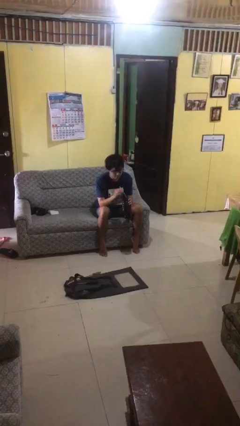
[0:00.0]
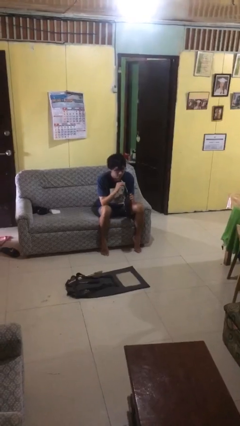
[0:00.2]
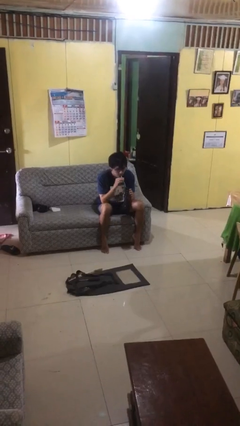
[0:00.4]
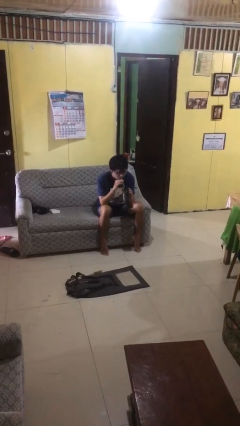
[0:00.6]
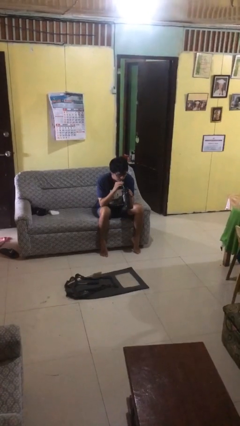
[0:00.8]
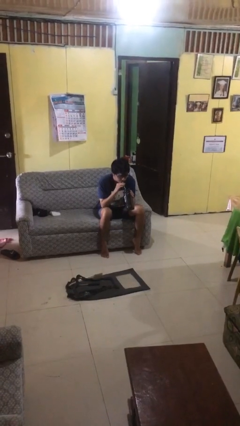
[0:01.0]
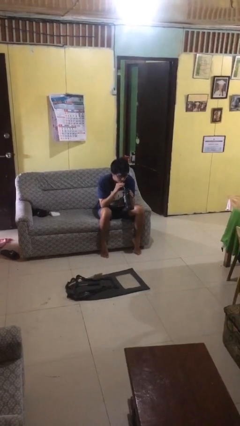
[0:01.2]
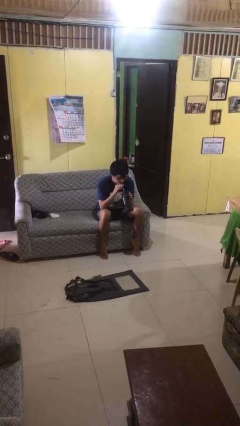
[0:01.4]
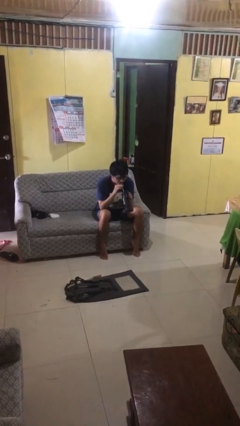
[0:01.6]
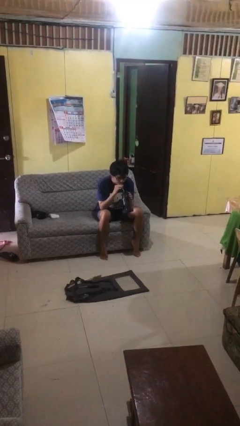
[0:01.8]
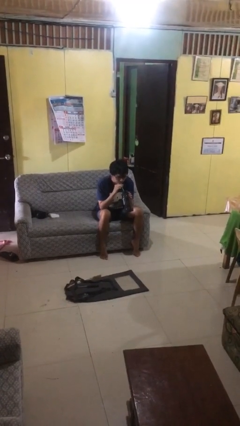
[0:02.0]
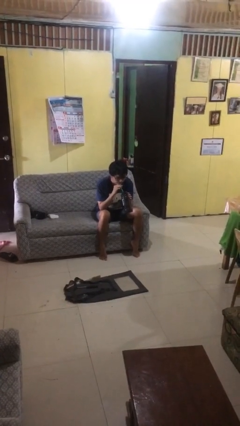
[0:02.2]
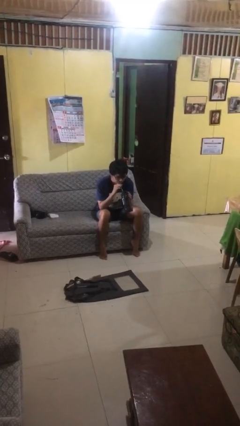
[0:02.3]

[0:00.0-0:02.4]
person drinks from straw

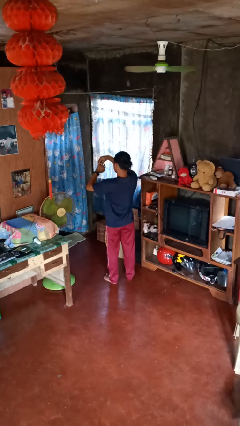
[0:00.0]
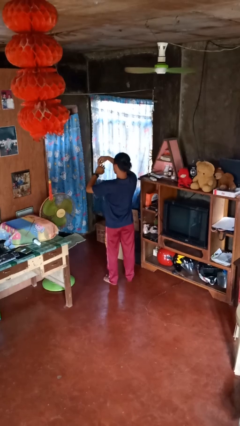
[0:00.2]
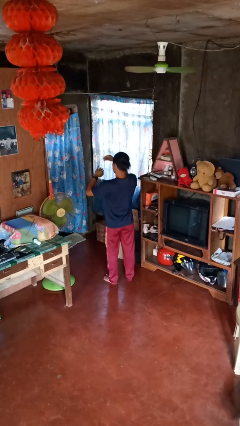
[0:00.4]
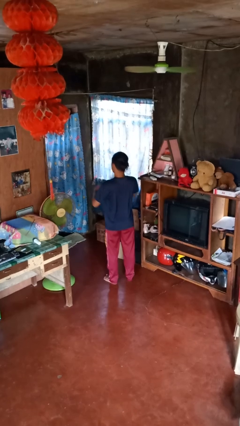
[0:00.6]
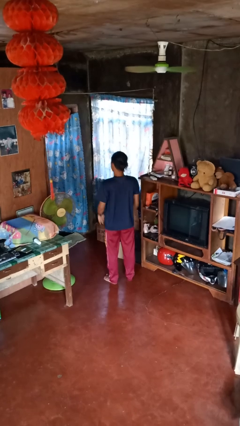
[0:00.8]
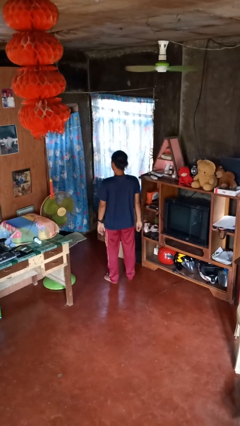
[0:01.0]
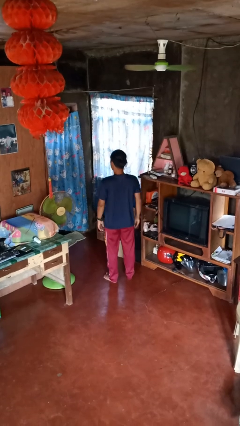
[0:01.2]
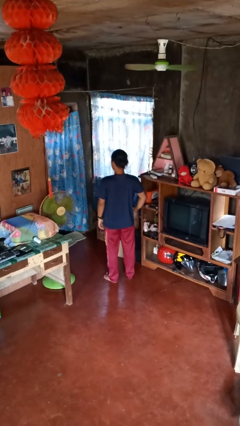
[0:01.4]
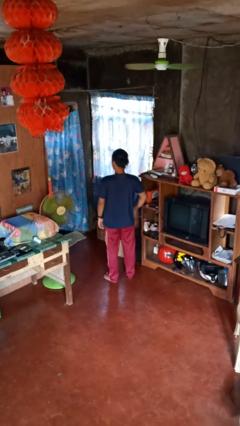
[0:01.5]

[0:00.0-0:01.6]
person takes off ring

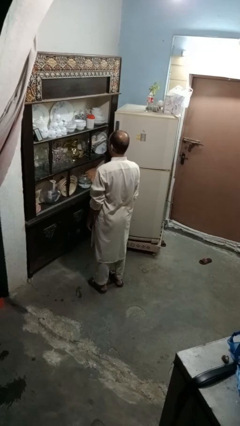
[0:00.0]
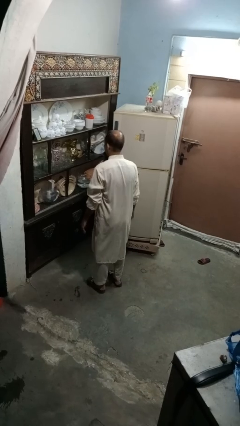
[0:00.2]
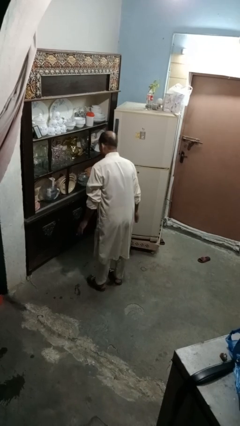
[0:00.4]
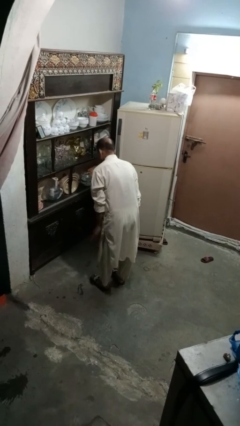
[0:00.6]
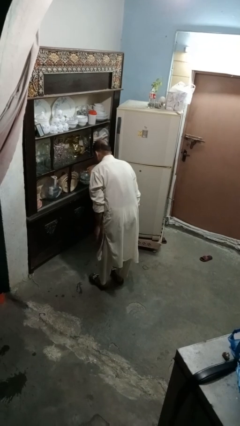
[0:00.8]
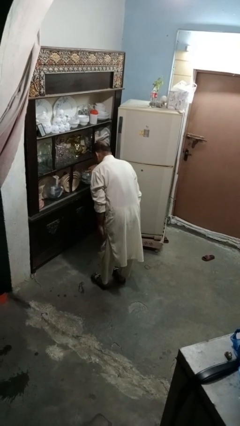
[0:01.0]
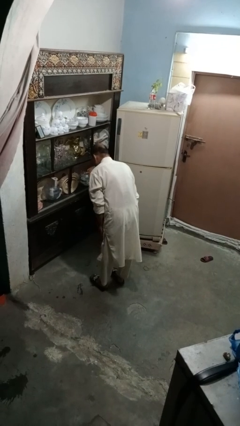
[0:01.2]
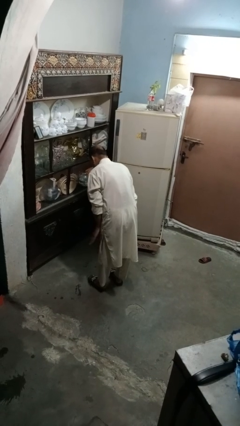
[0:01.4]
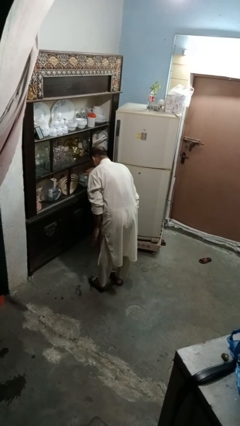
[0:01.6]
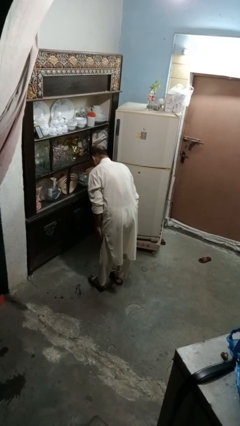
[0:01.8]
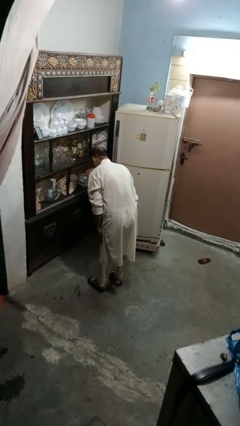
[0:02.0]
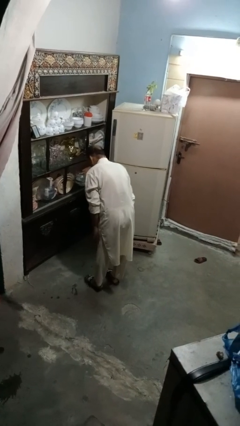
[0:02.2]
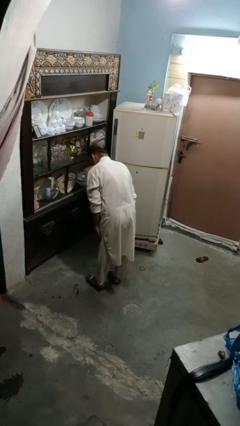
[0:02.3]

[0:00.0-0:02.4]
person slaps hands on thighs

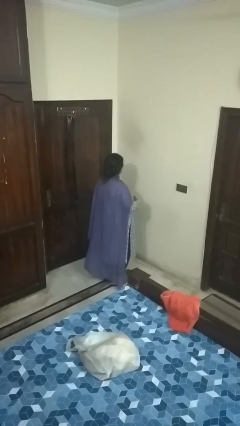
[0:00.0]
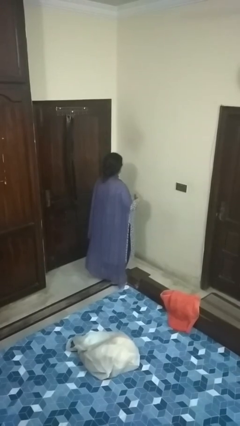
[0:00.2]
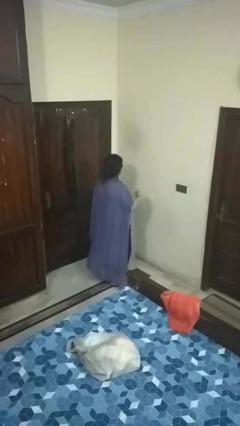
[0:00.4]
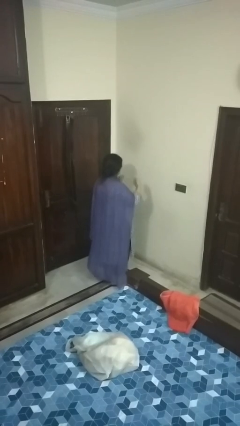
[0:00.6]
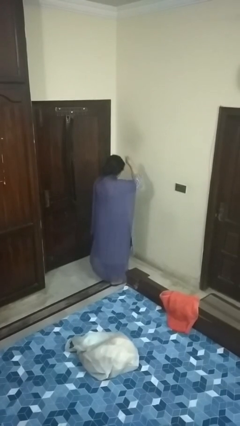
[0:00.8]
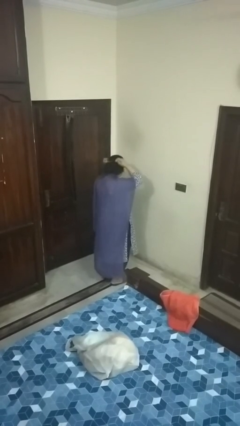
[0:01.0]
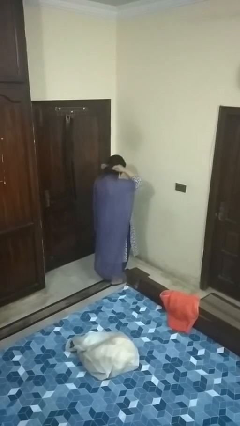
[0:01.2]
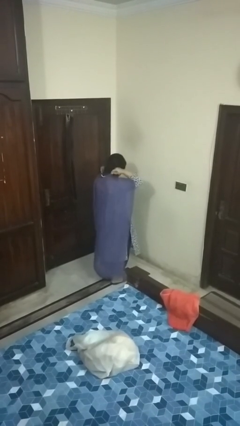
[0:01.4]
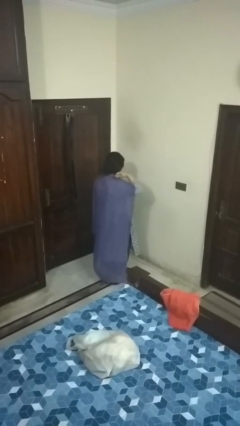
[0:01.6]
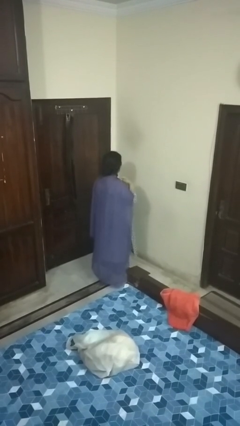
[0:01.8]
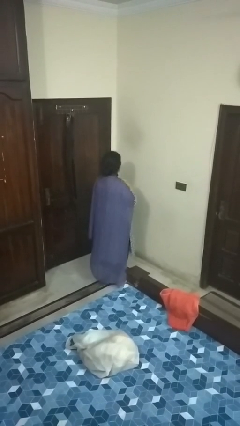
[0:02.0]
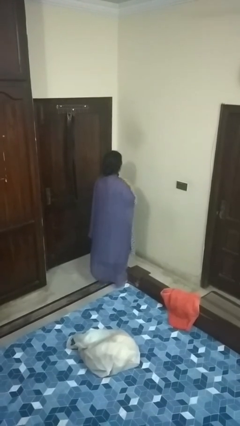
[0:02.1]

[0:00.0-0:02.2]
person puts on necklace

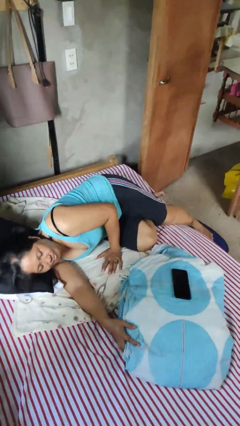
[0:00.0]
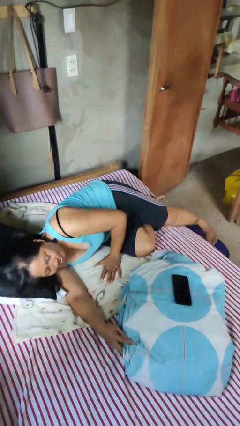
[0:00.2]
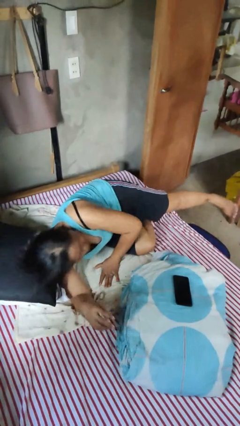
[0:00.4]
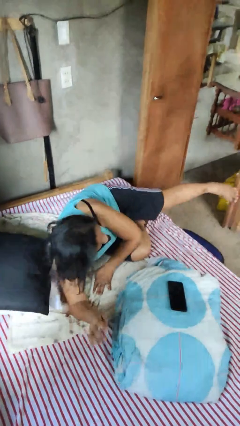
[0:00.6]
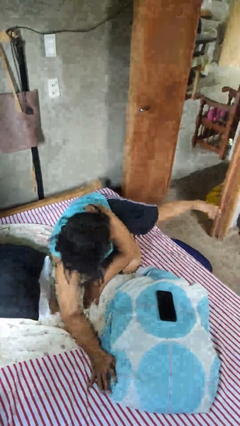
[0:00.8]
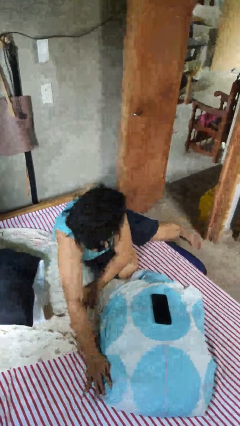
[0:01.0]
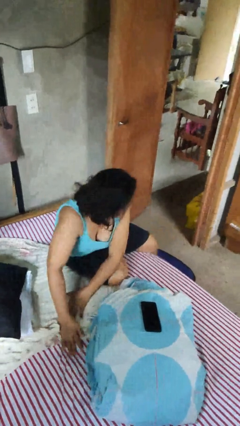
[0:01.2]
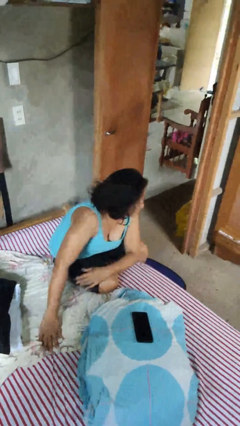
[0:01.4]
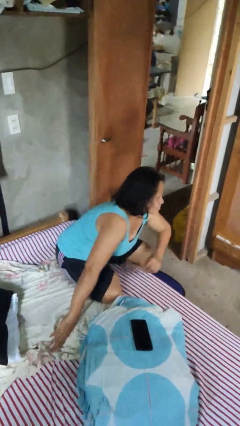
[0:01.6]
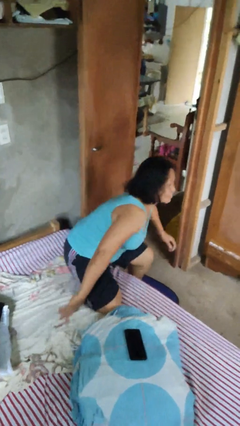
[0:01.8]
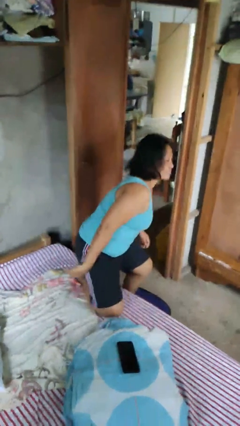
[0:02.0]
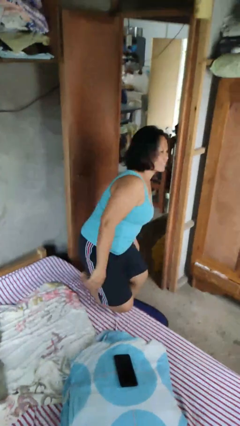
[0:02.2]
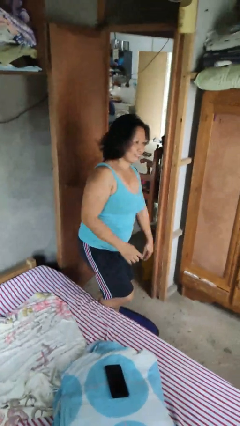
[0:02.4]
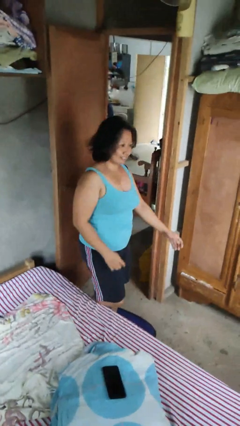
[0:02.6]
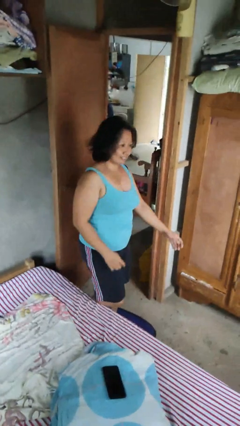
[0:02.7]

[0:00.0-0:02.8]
person stands up

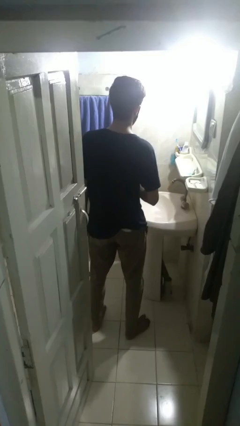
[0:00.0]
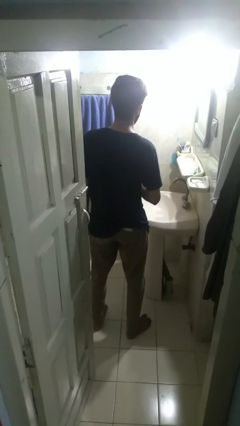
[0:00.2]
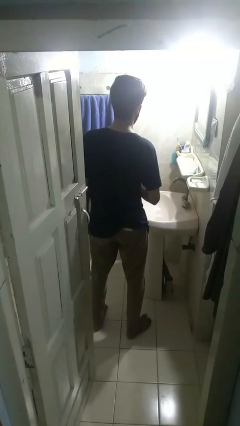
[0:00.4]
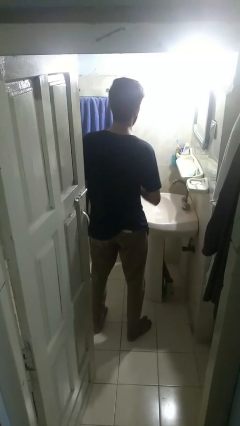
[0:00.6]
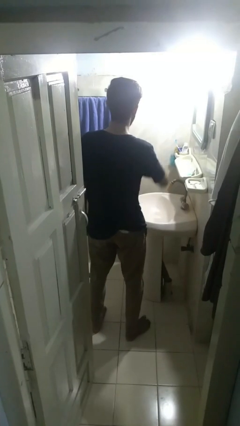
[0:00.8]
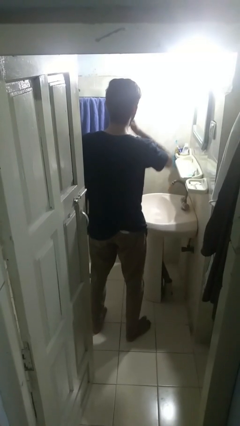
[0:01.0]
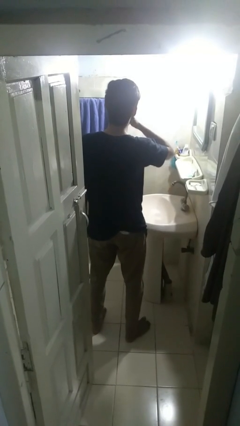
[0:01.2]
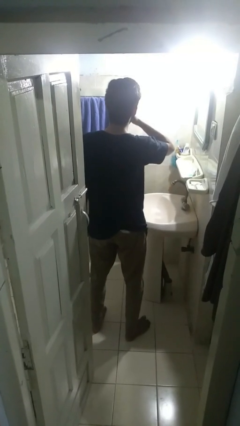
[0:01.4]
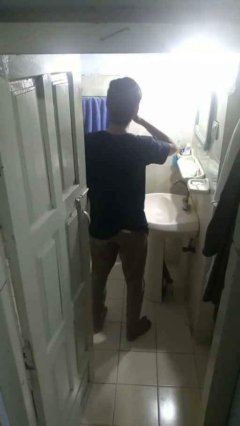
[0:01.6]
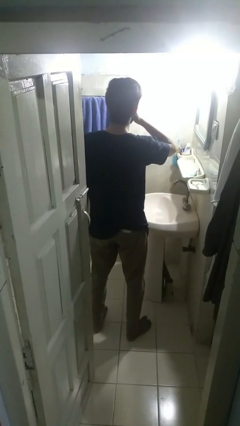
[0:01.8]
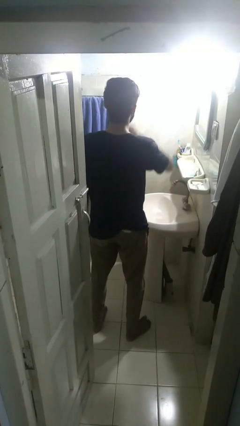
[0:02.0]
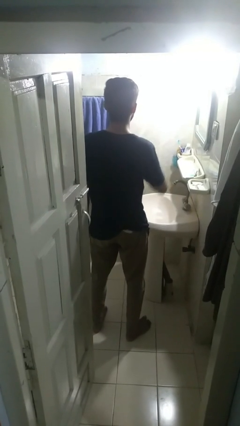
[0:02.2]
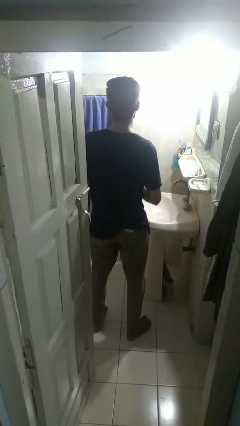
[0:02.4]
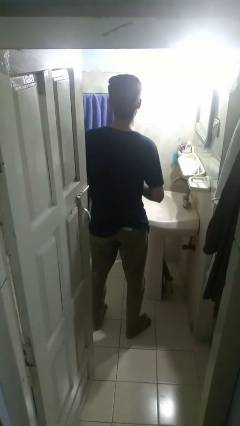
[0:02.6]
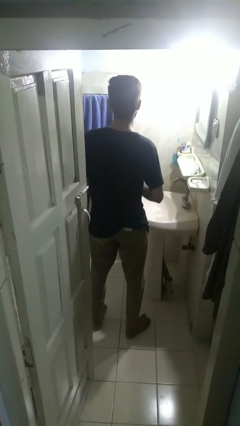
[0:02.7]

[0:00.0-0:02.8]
person flosses

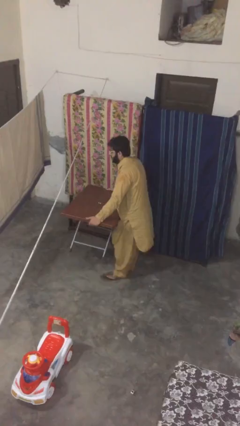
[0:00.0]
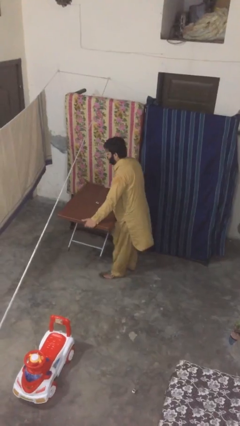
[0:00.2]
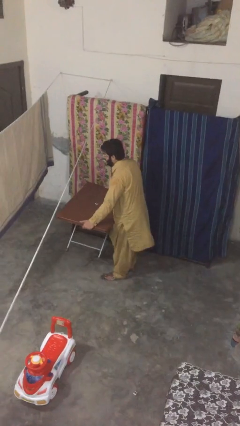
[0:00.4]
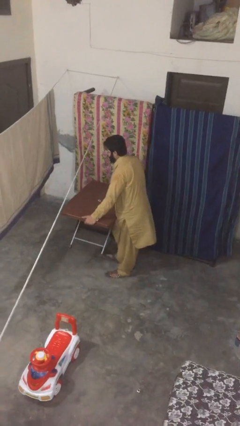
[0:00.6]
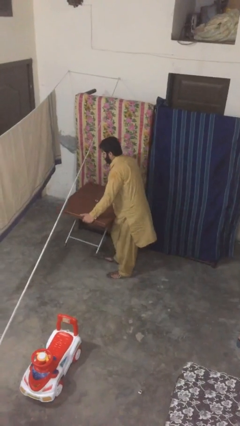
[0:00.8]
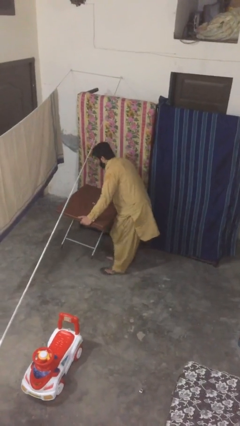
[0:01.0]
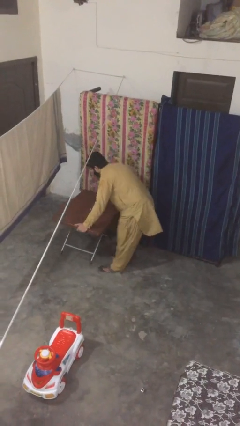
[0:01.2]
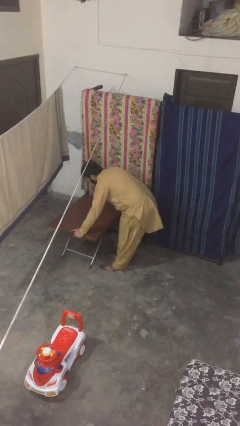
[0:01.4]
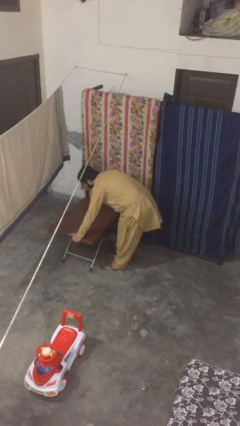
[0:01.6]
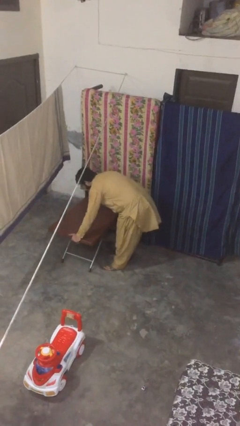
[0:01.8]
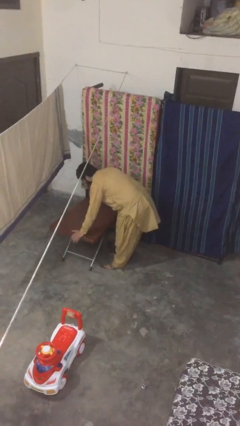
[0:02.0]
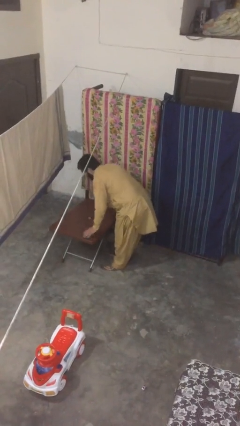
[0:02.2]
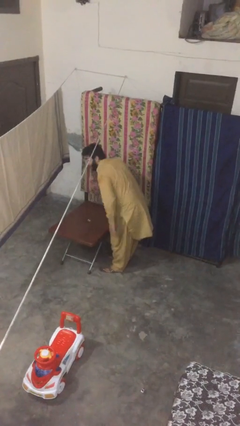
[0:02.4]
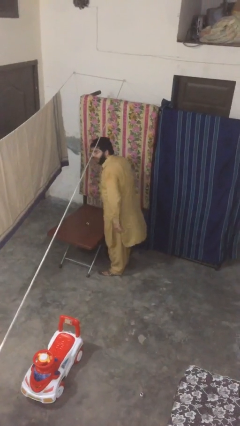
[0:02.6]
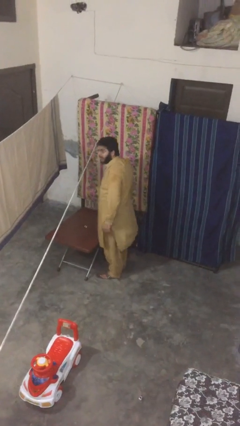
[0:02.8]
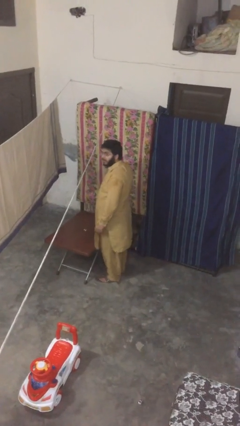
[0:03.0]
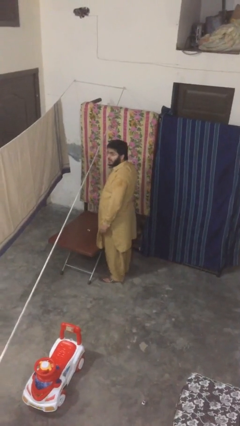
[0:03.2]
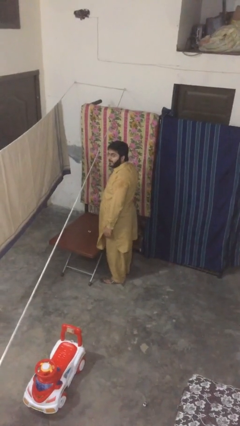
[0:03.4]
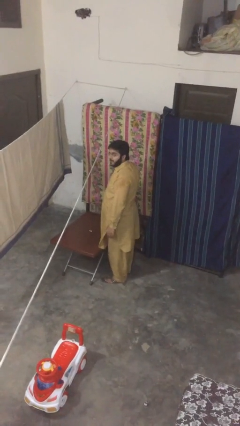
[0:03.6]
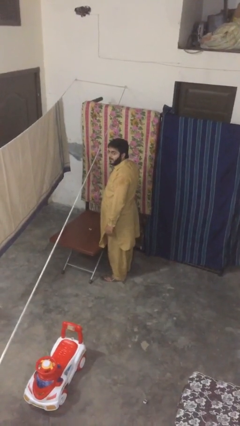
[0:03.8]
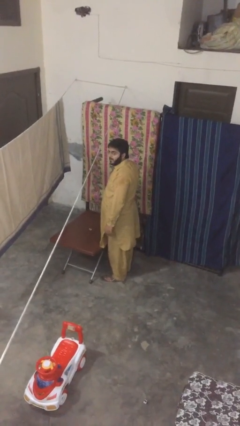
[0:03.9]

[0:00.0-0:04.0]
person puts down object on floor
